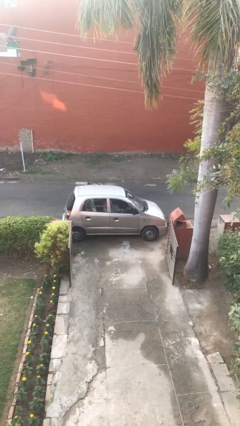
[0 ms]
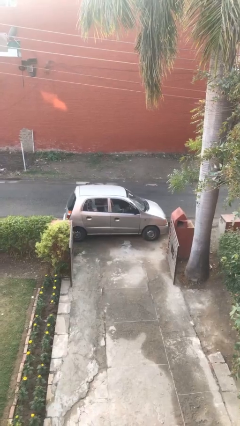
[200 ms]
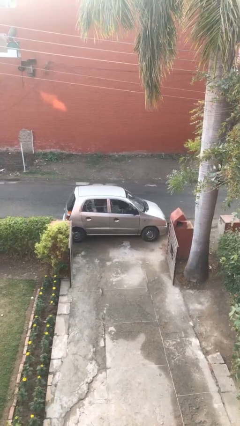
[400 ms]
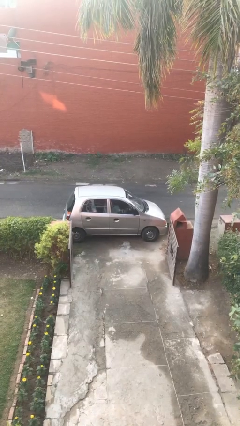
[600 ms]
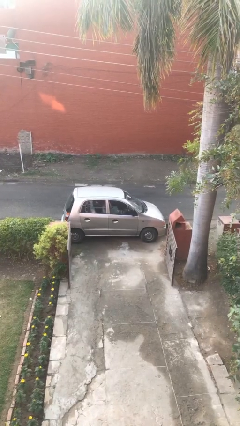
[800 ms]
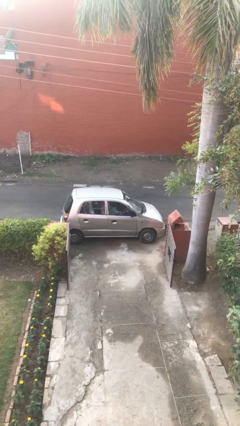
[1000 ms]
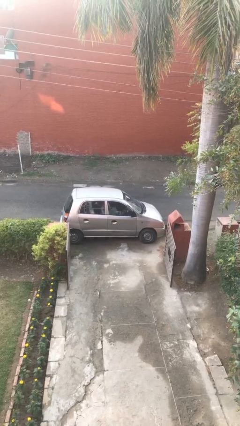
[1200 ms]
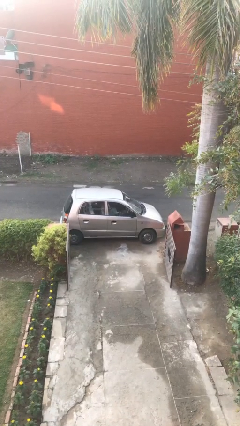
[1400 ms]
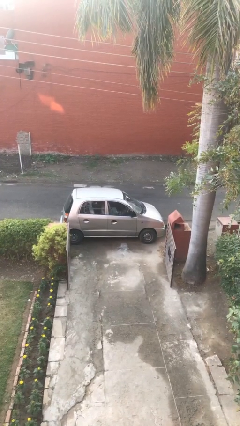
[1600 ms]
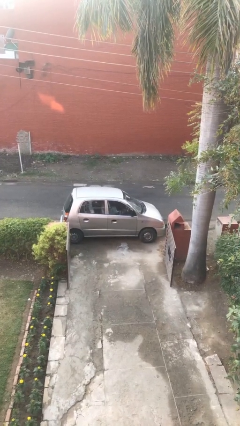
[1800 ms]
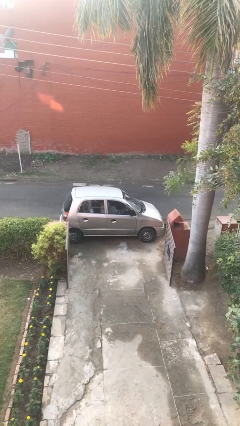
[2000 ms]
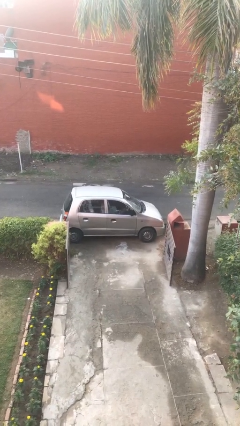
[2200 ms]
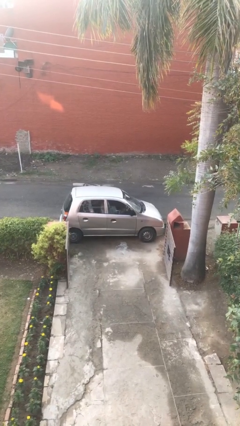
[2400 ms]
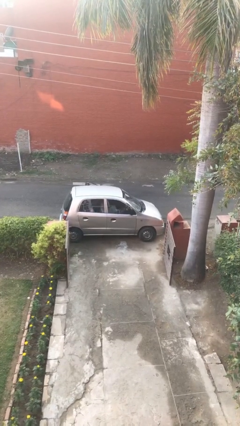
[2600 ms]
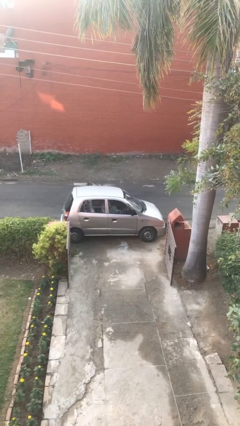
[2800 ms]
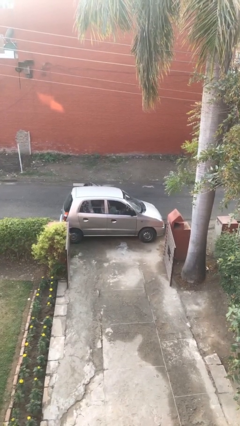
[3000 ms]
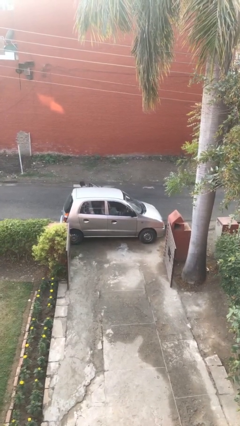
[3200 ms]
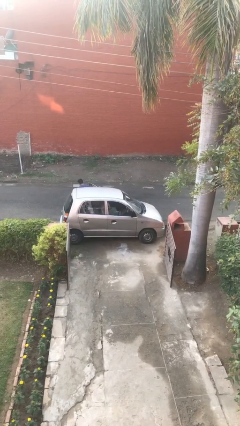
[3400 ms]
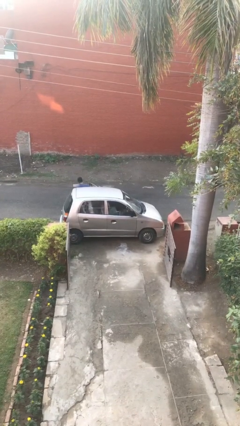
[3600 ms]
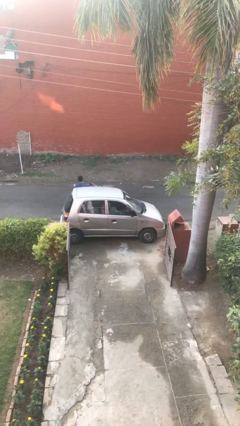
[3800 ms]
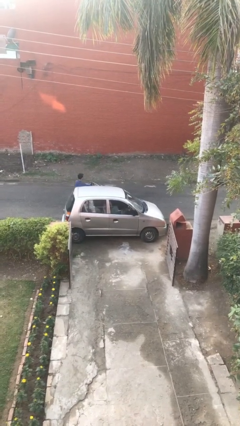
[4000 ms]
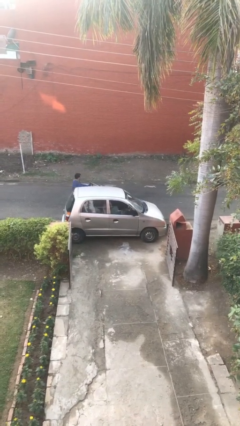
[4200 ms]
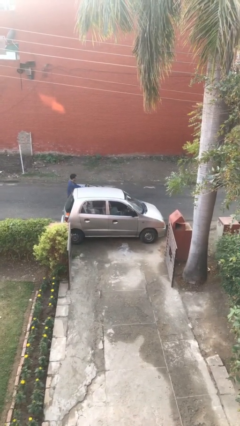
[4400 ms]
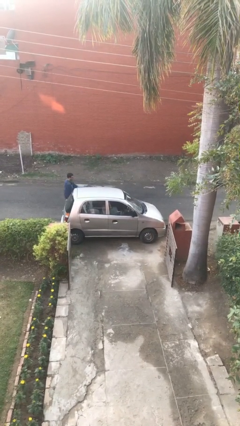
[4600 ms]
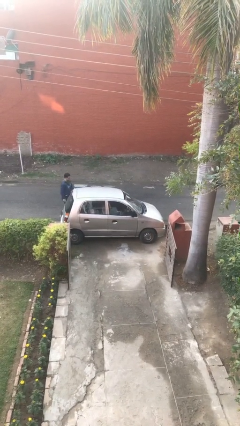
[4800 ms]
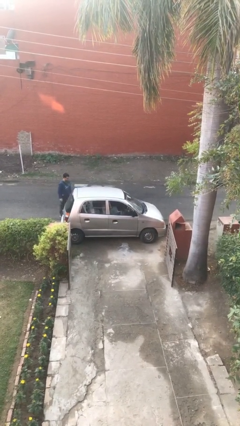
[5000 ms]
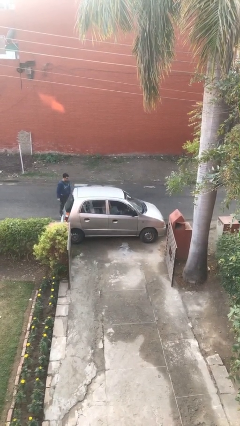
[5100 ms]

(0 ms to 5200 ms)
car drops off person

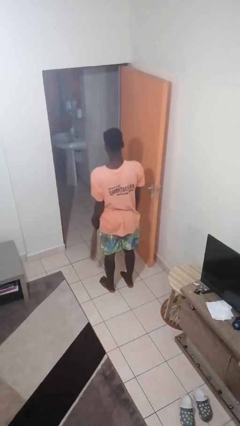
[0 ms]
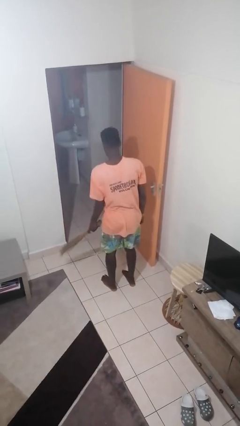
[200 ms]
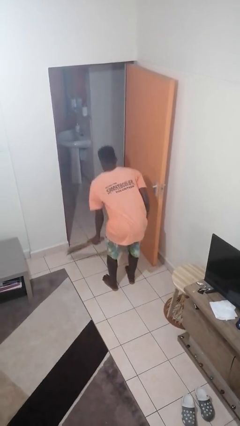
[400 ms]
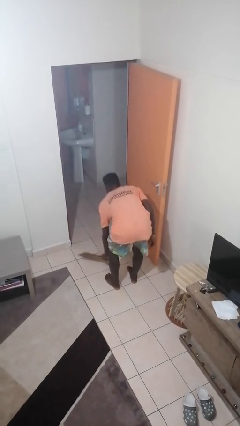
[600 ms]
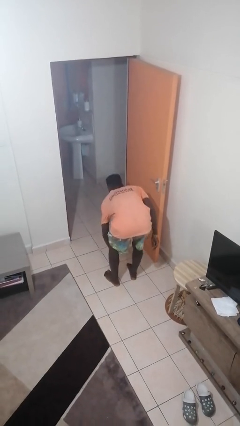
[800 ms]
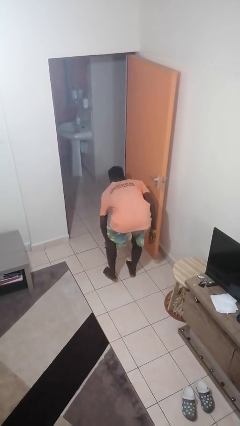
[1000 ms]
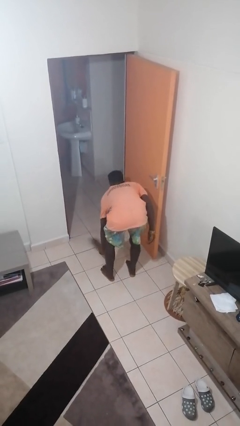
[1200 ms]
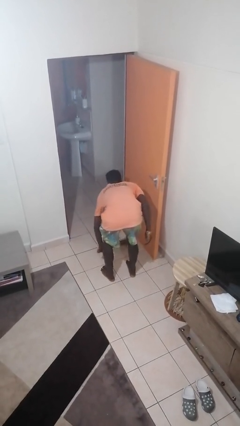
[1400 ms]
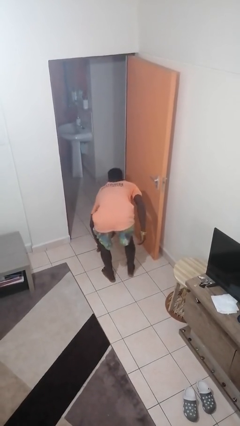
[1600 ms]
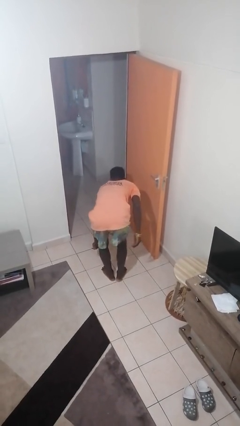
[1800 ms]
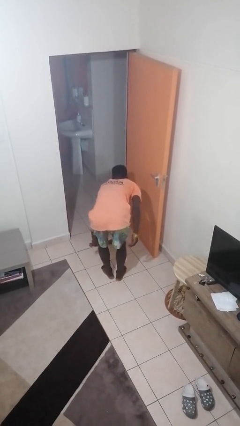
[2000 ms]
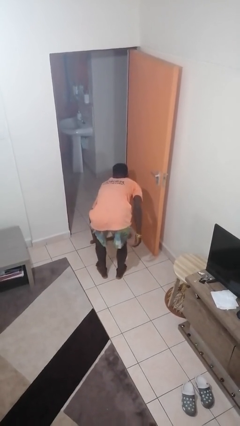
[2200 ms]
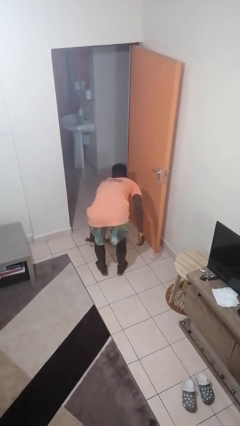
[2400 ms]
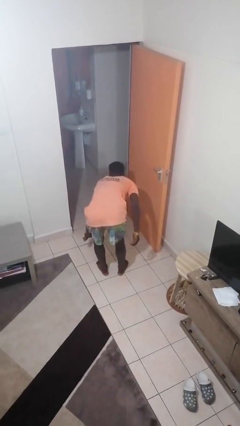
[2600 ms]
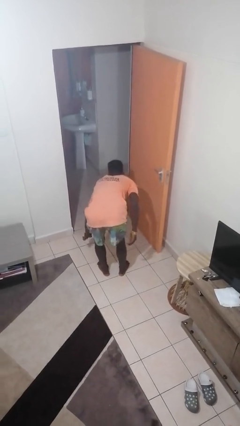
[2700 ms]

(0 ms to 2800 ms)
person sweeps floor

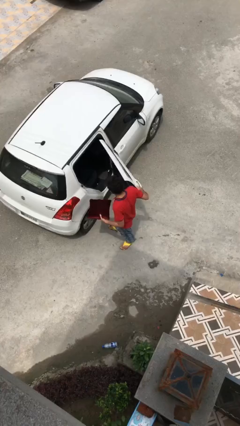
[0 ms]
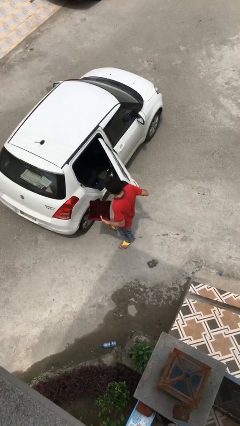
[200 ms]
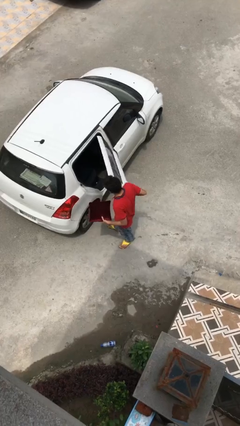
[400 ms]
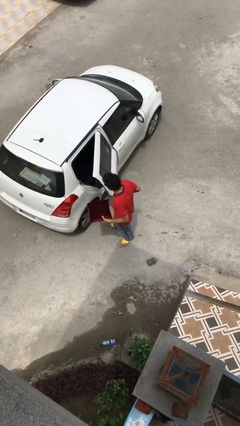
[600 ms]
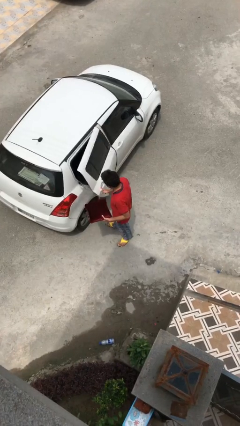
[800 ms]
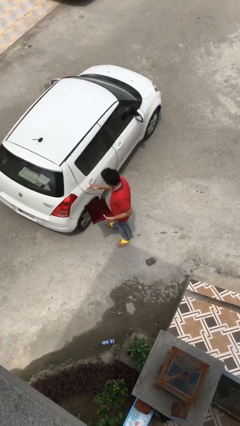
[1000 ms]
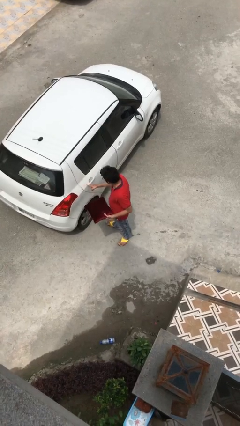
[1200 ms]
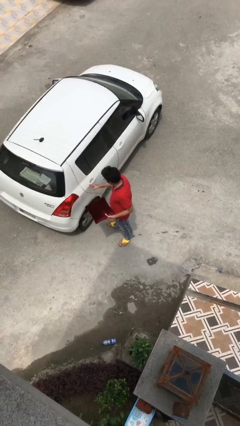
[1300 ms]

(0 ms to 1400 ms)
person closes car door

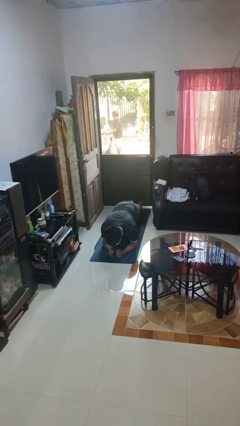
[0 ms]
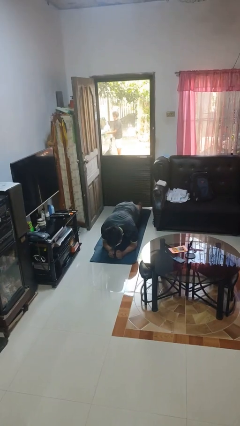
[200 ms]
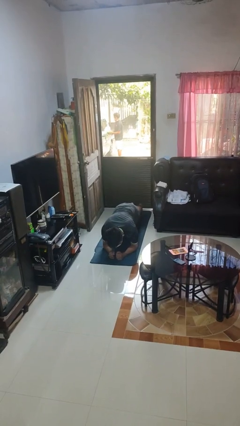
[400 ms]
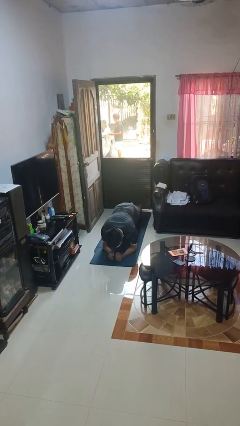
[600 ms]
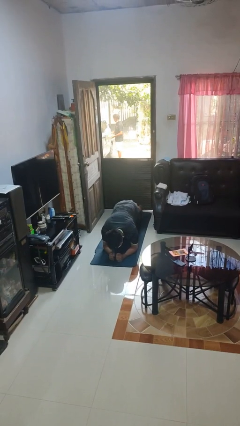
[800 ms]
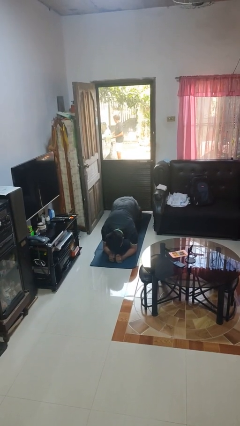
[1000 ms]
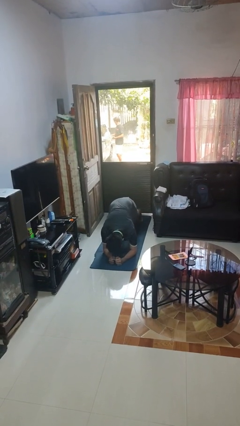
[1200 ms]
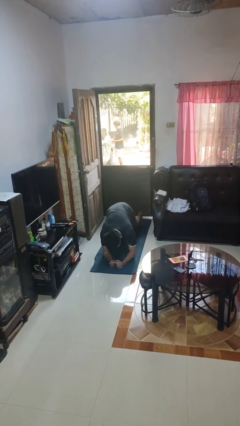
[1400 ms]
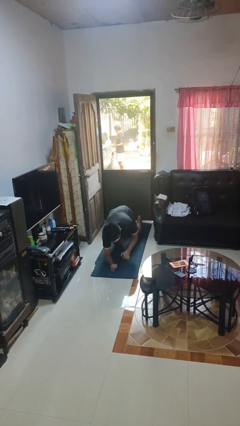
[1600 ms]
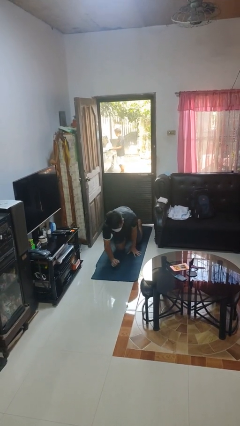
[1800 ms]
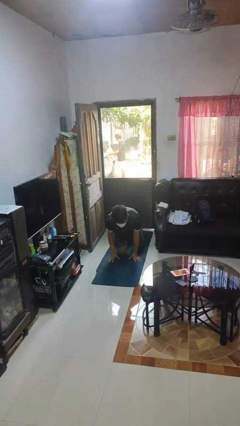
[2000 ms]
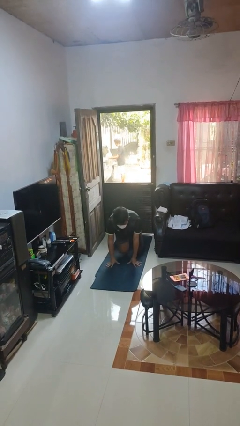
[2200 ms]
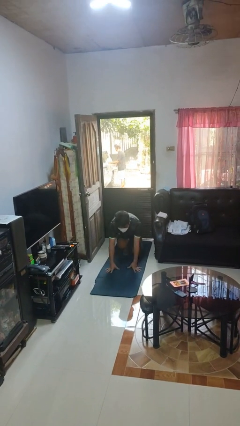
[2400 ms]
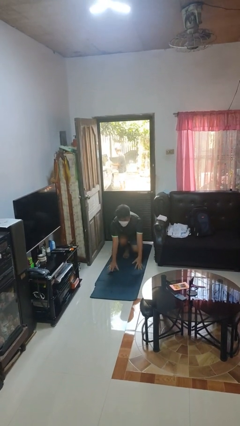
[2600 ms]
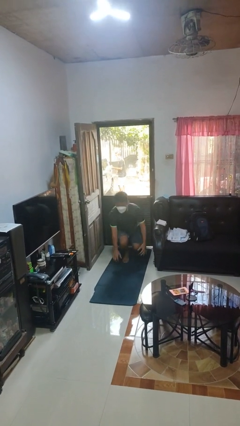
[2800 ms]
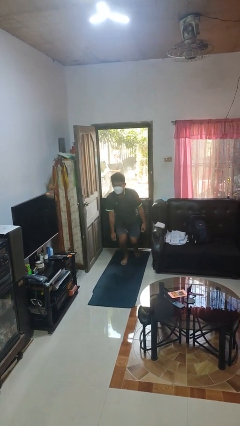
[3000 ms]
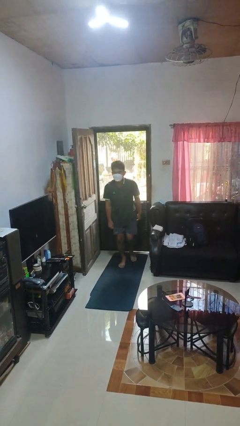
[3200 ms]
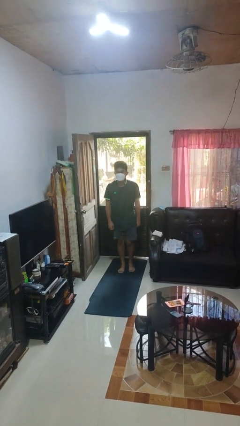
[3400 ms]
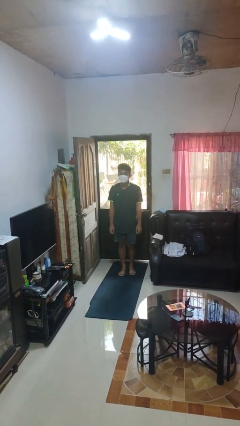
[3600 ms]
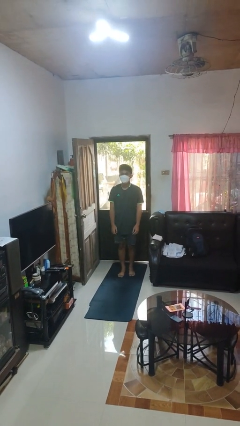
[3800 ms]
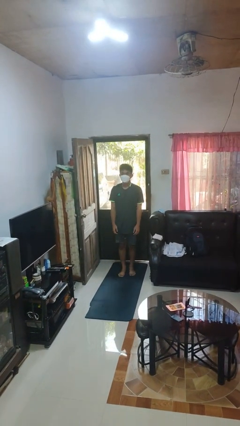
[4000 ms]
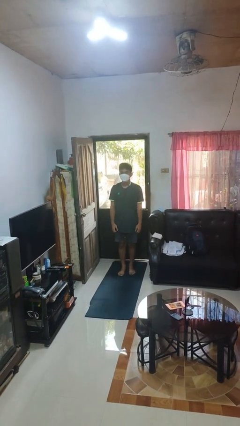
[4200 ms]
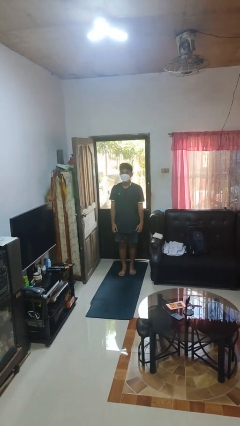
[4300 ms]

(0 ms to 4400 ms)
person stands up from floor

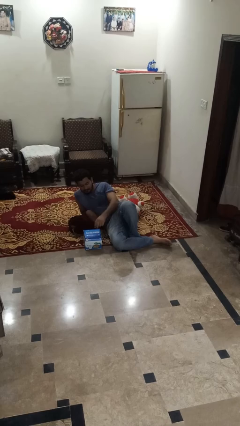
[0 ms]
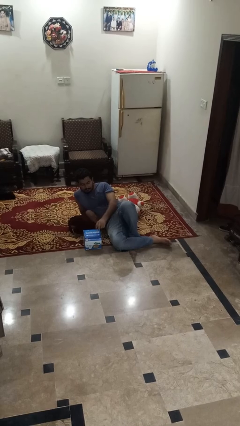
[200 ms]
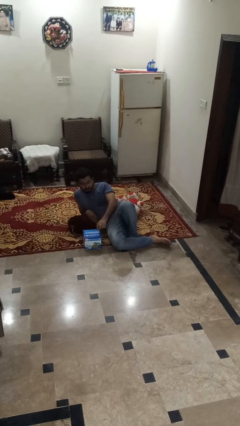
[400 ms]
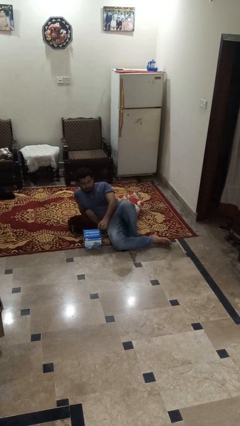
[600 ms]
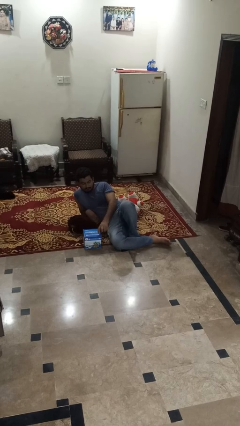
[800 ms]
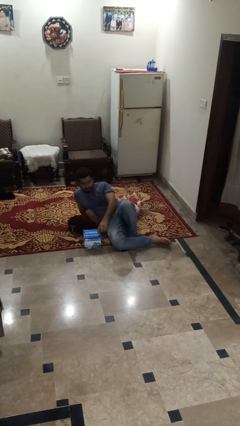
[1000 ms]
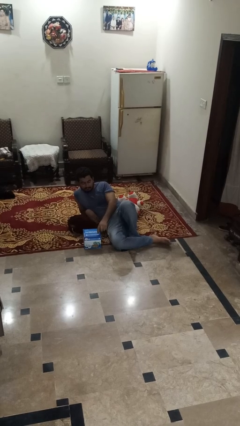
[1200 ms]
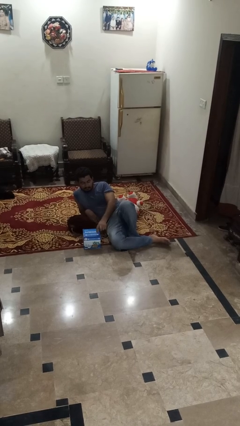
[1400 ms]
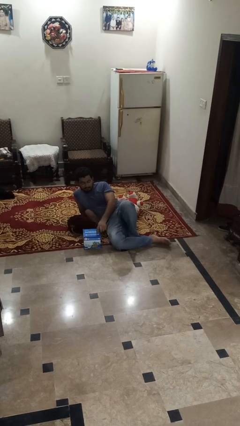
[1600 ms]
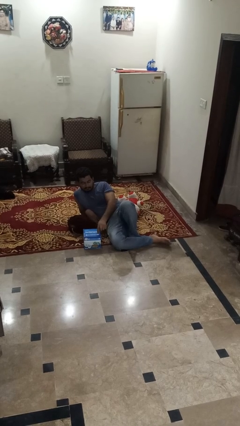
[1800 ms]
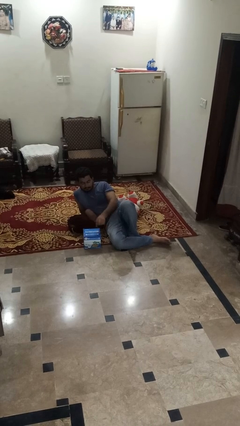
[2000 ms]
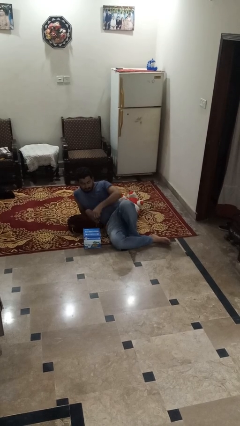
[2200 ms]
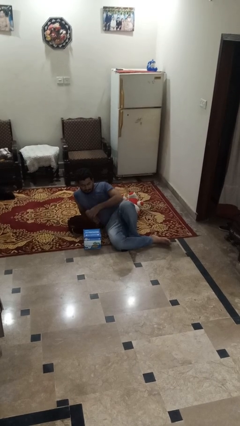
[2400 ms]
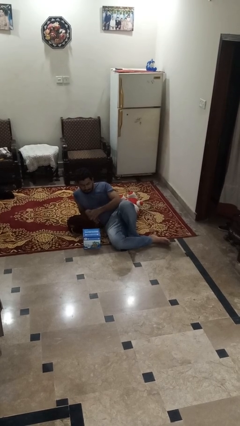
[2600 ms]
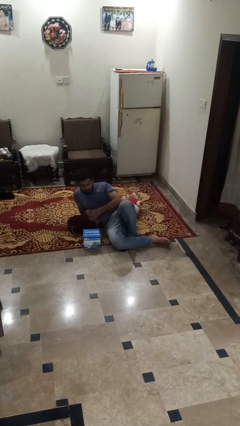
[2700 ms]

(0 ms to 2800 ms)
person taps object with finger

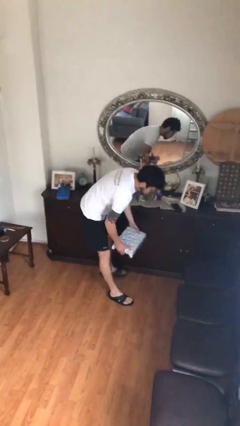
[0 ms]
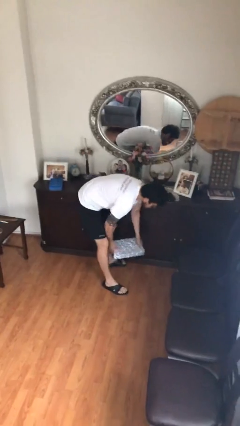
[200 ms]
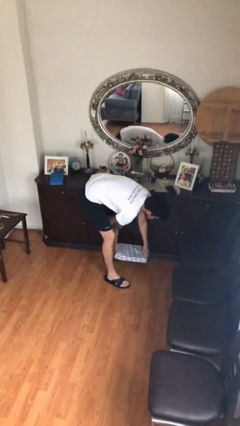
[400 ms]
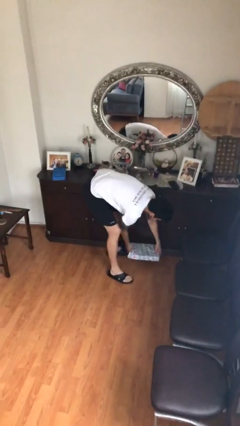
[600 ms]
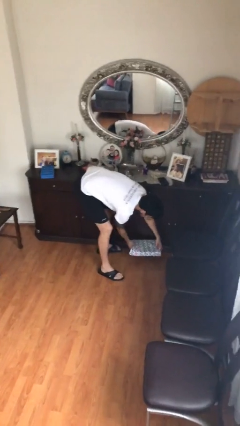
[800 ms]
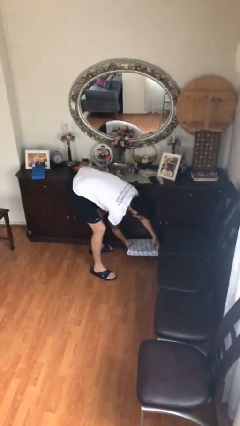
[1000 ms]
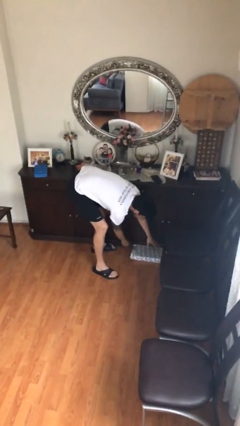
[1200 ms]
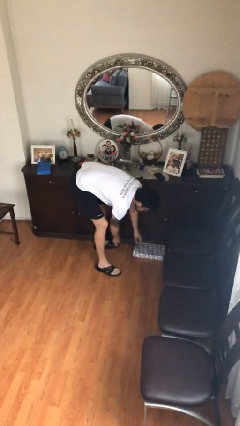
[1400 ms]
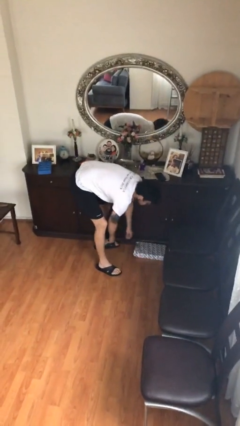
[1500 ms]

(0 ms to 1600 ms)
person puts down object on floor
